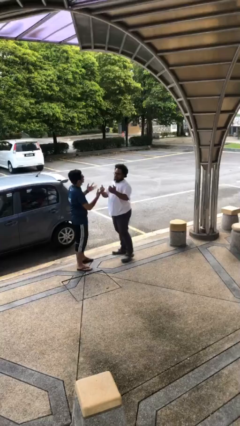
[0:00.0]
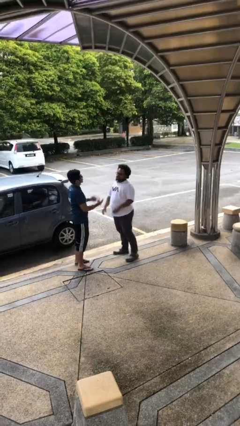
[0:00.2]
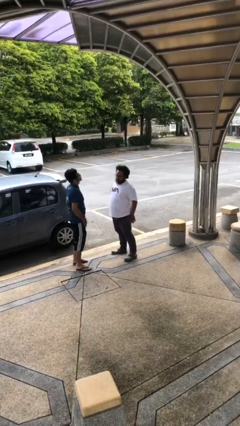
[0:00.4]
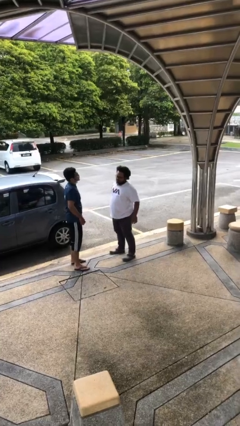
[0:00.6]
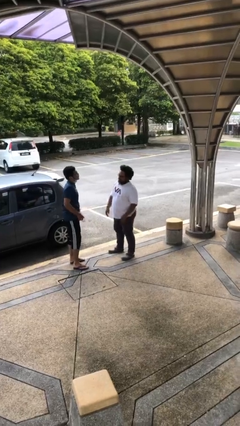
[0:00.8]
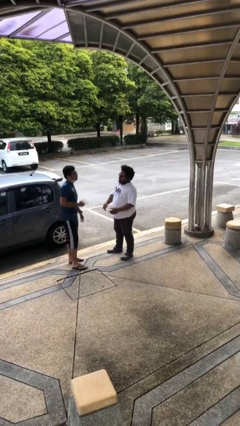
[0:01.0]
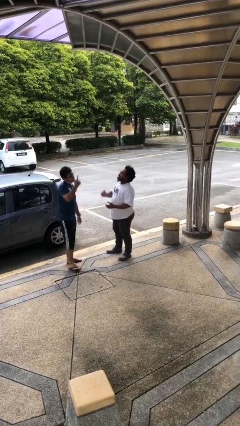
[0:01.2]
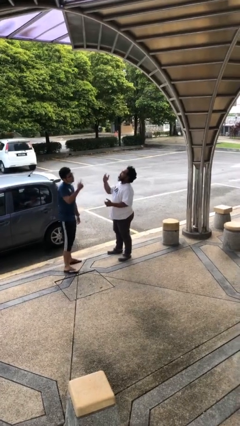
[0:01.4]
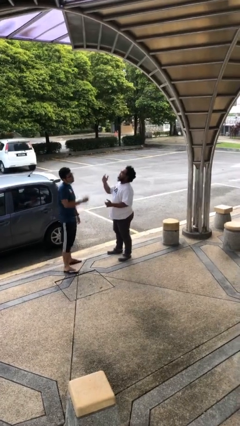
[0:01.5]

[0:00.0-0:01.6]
person talks to person

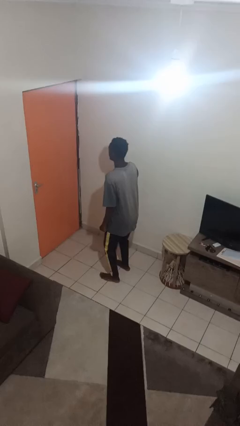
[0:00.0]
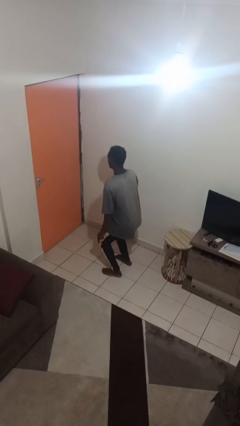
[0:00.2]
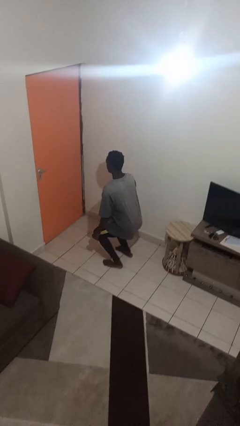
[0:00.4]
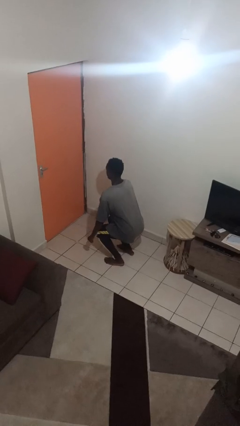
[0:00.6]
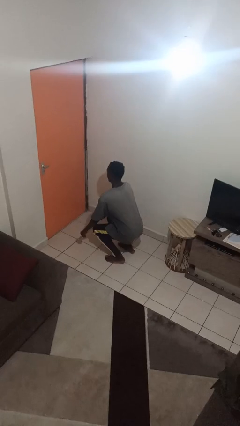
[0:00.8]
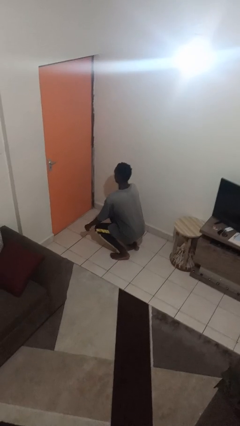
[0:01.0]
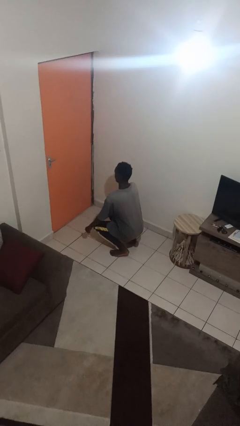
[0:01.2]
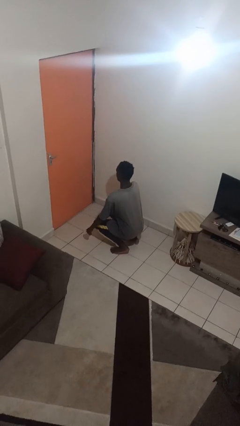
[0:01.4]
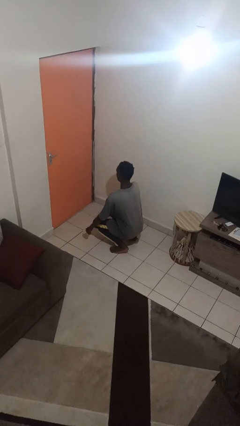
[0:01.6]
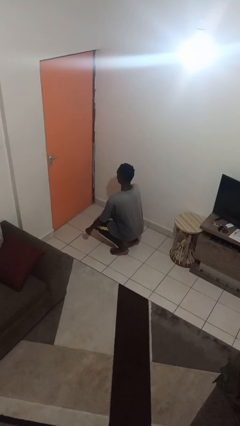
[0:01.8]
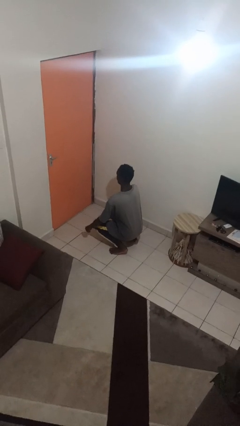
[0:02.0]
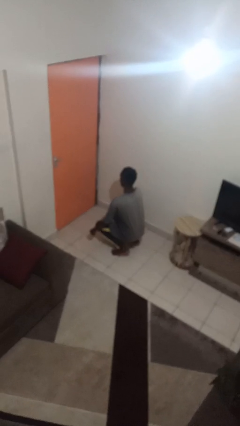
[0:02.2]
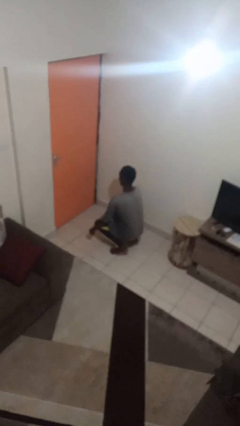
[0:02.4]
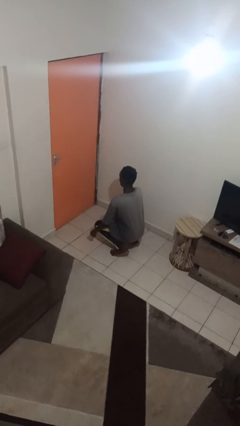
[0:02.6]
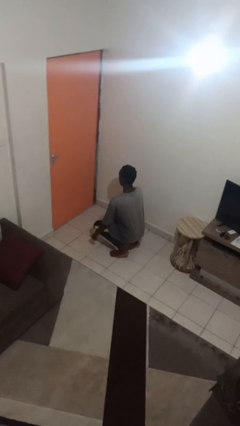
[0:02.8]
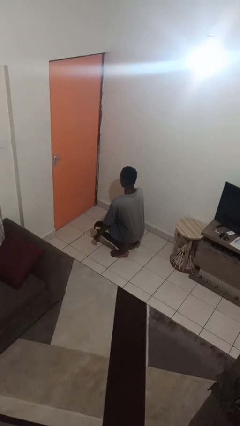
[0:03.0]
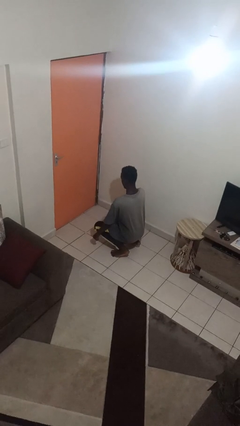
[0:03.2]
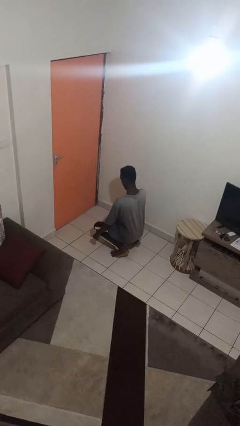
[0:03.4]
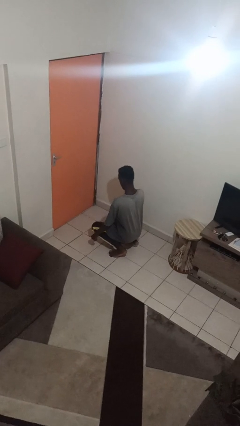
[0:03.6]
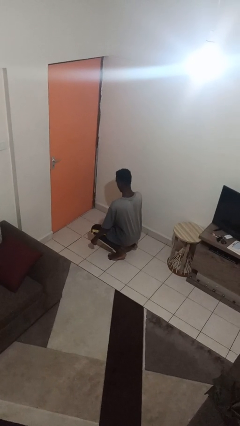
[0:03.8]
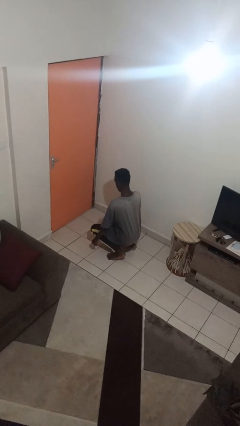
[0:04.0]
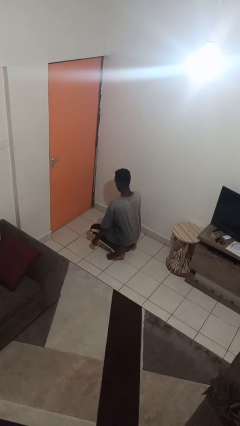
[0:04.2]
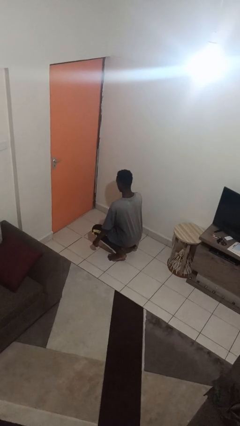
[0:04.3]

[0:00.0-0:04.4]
person squats

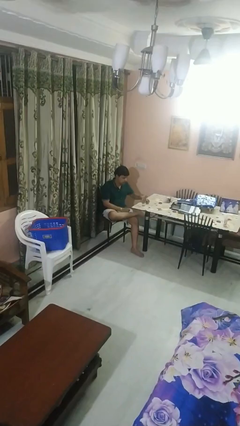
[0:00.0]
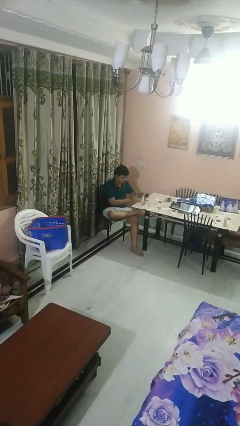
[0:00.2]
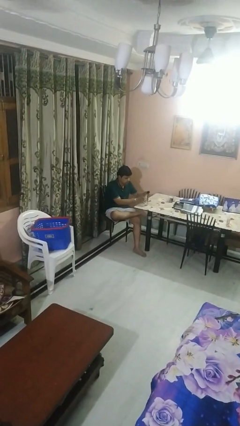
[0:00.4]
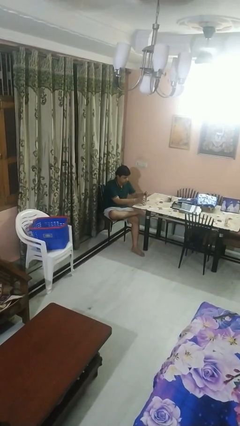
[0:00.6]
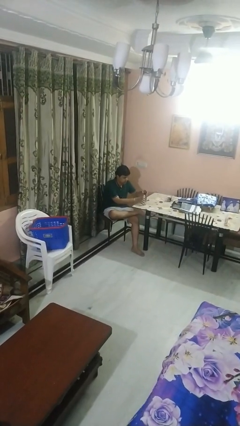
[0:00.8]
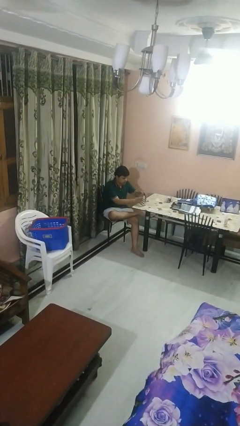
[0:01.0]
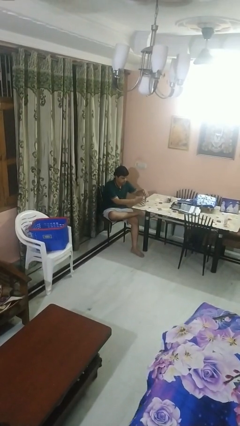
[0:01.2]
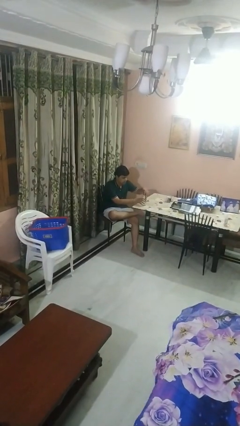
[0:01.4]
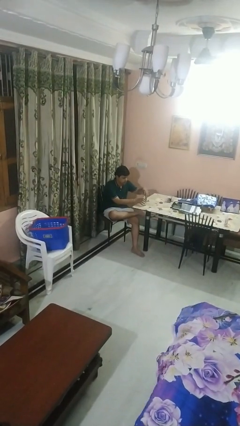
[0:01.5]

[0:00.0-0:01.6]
person screws lid to bottle

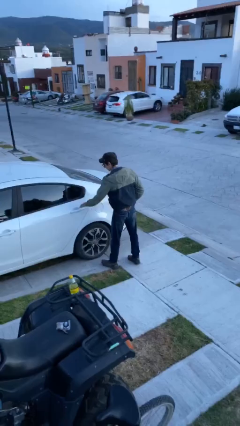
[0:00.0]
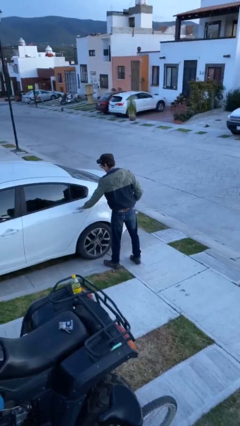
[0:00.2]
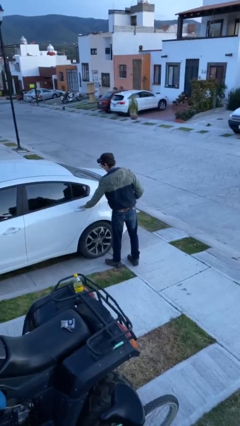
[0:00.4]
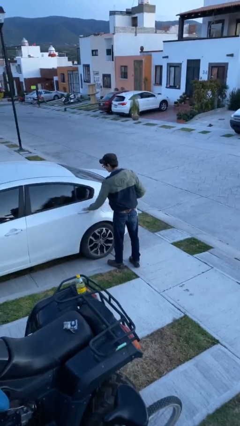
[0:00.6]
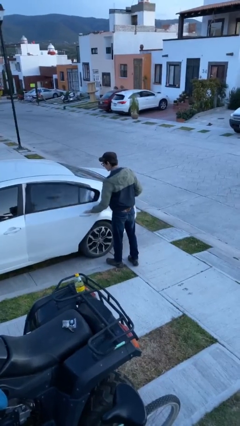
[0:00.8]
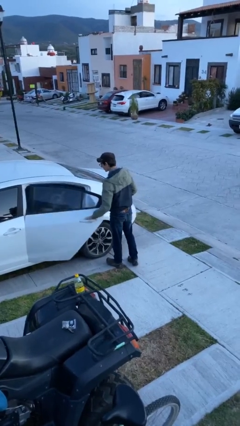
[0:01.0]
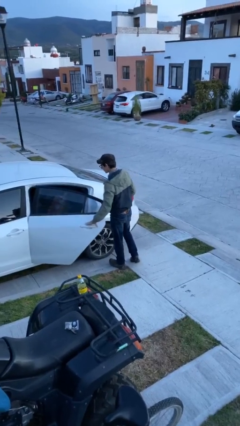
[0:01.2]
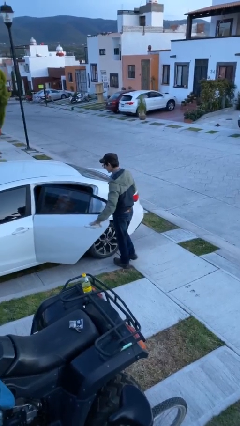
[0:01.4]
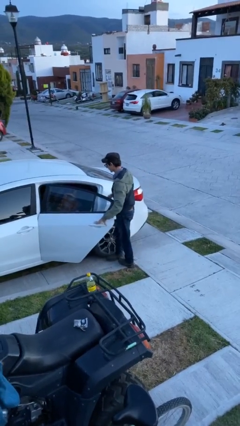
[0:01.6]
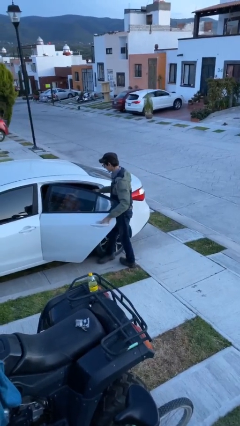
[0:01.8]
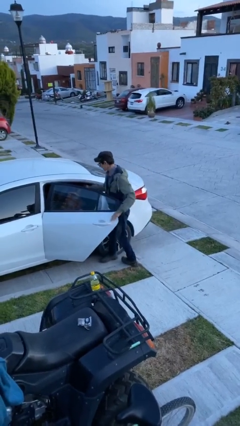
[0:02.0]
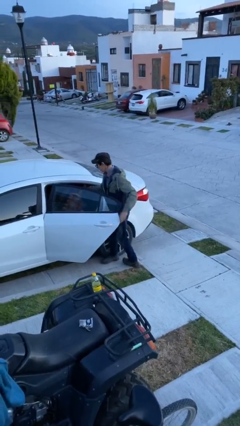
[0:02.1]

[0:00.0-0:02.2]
person opens car door

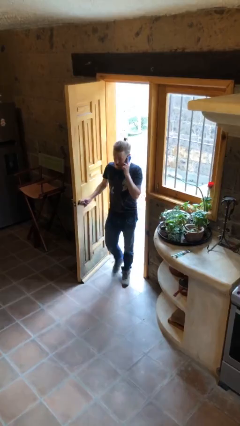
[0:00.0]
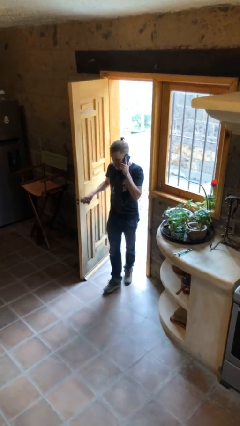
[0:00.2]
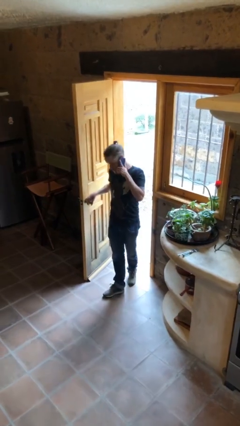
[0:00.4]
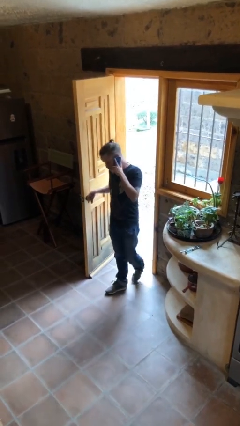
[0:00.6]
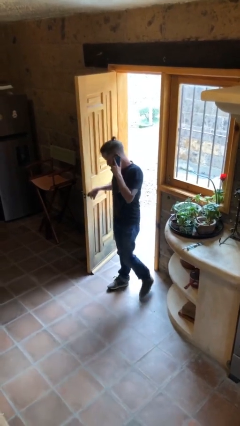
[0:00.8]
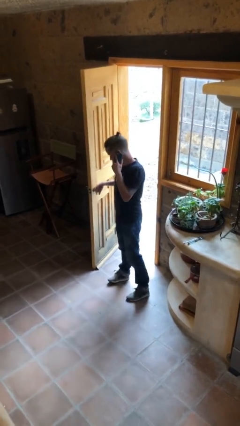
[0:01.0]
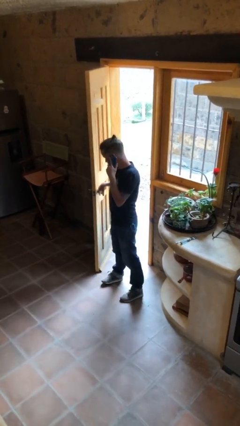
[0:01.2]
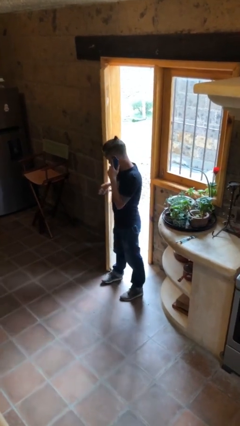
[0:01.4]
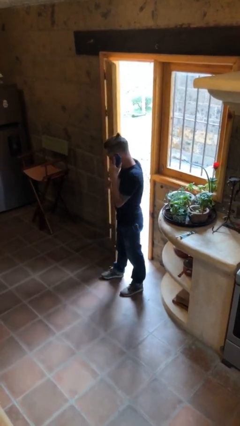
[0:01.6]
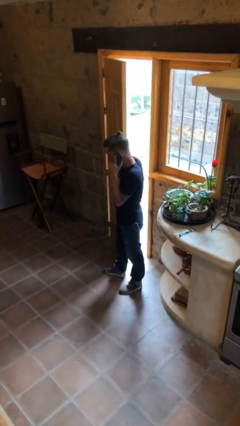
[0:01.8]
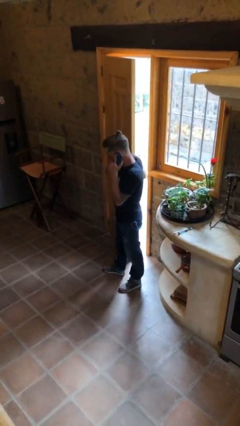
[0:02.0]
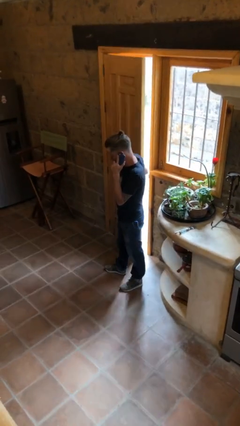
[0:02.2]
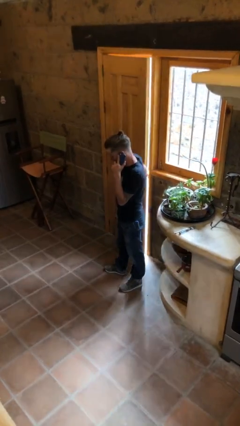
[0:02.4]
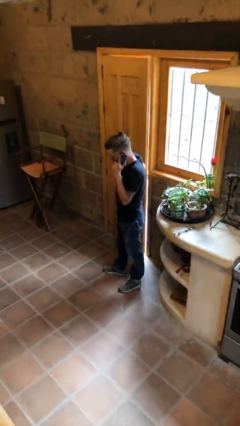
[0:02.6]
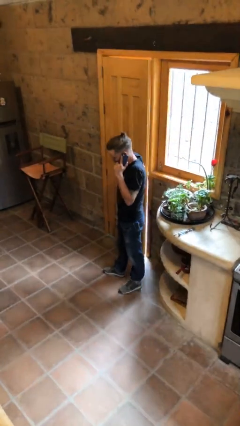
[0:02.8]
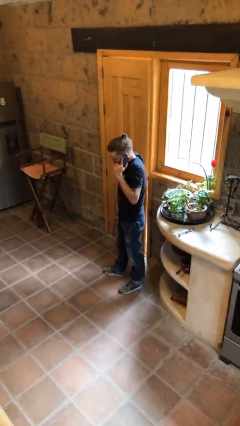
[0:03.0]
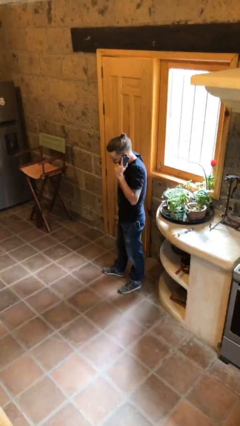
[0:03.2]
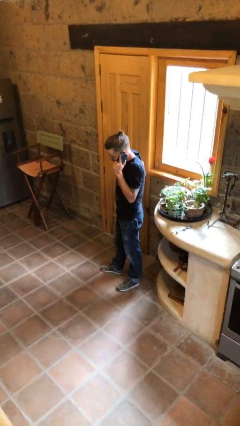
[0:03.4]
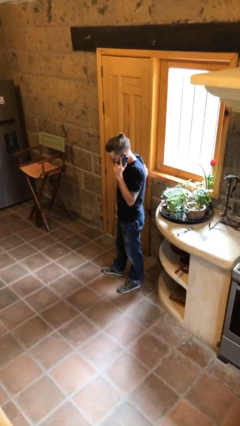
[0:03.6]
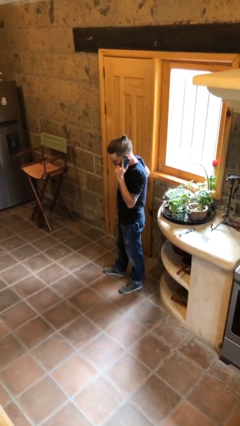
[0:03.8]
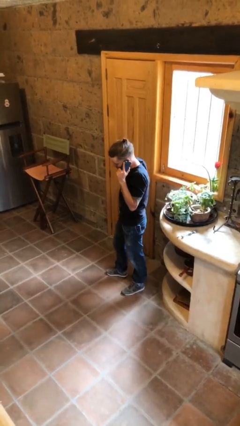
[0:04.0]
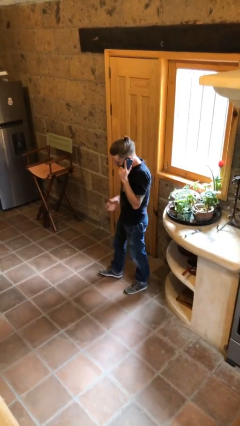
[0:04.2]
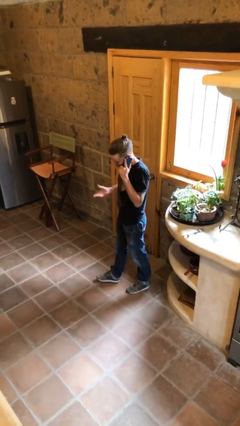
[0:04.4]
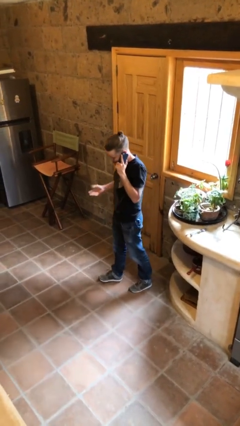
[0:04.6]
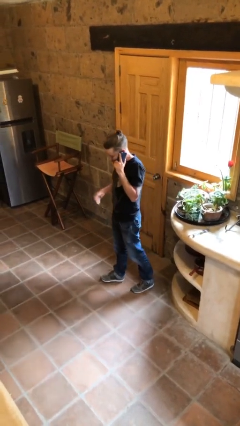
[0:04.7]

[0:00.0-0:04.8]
person closes facility door

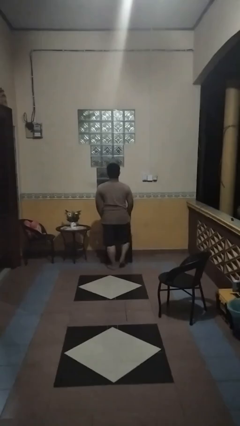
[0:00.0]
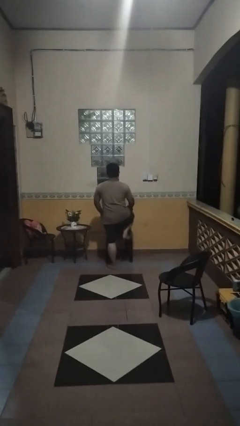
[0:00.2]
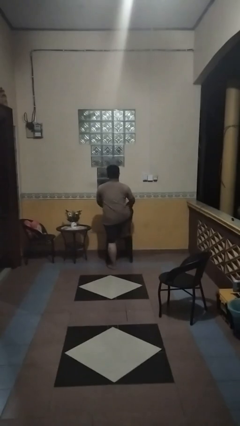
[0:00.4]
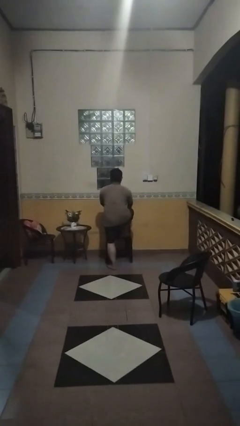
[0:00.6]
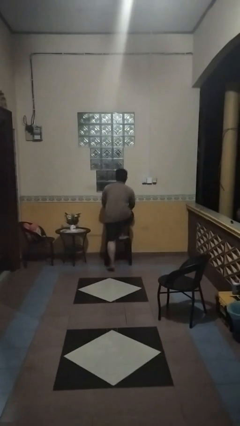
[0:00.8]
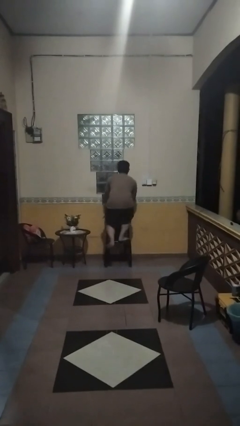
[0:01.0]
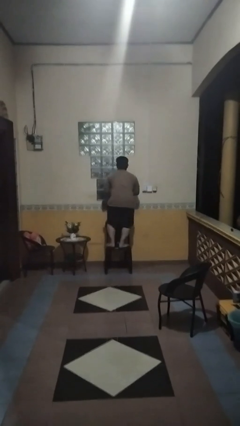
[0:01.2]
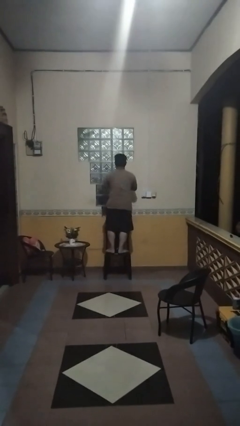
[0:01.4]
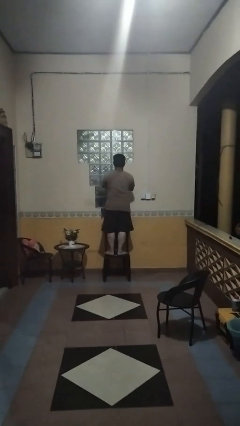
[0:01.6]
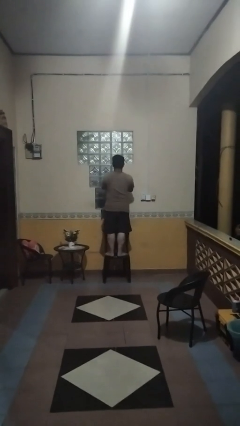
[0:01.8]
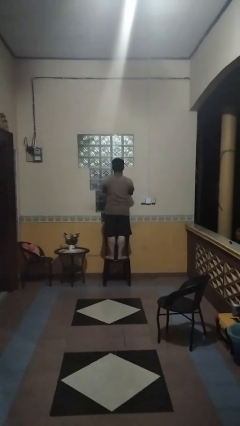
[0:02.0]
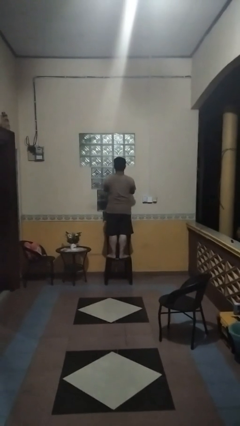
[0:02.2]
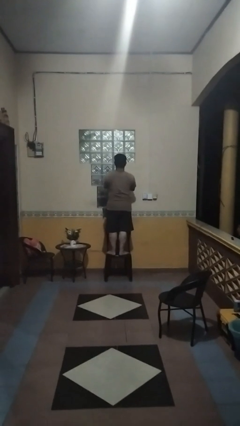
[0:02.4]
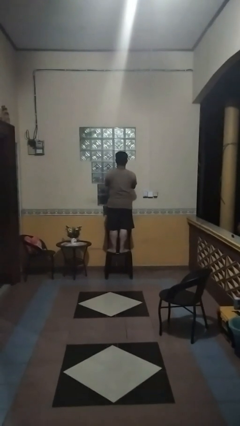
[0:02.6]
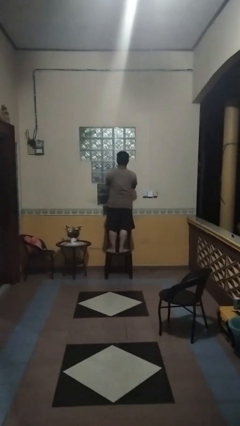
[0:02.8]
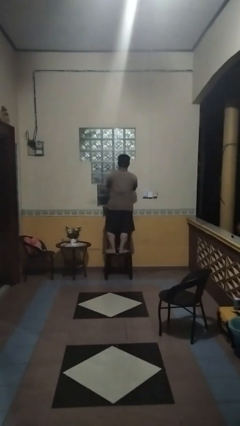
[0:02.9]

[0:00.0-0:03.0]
person climbs on chair
